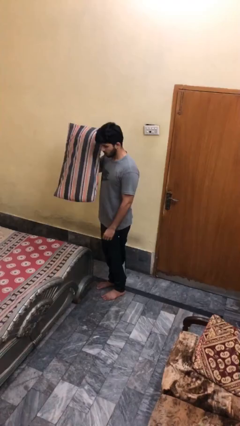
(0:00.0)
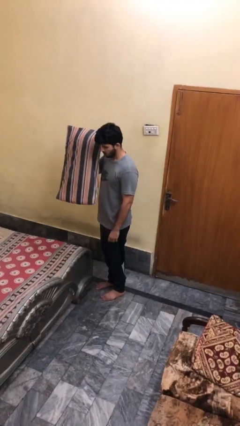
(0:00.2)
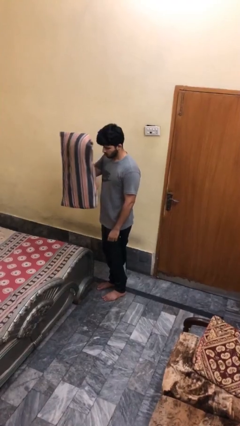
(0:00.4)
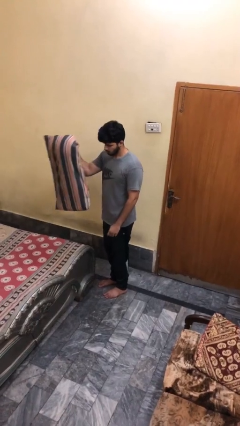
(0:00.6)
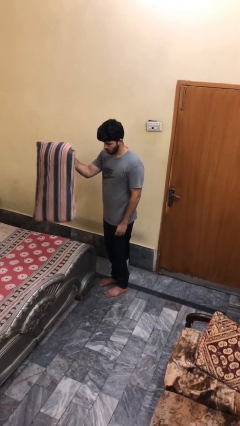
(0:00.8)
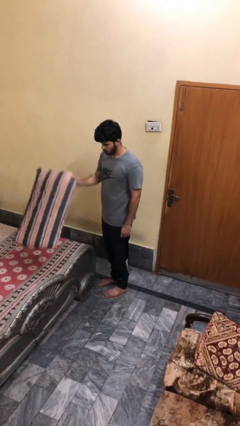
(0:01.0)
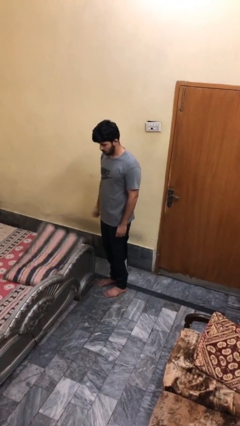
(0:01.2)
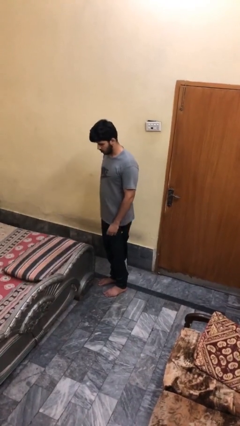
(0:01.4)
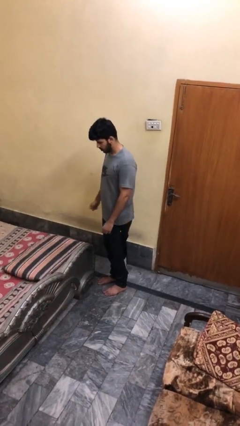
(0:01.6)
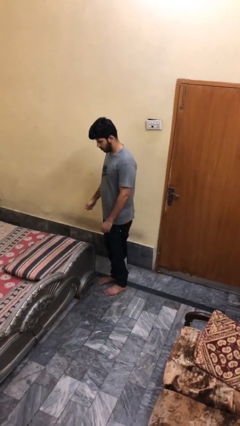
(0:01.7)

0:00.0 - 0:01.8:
person puts down object on bed

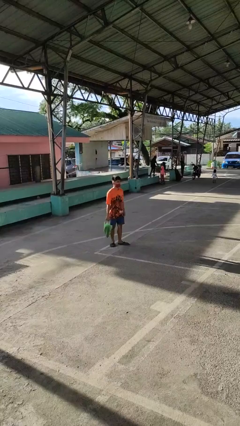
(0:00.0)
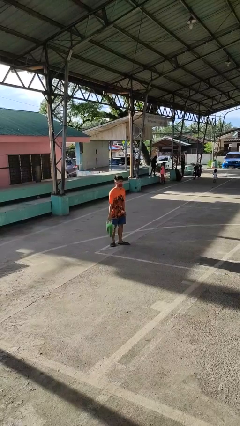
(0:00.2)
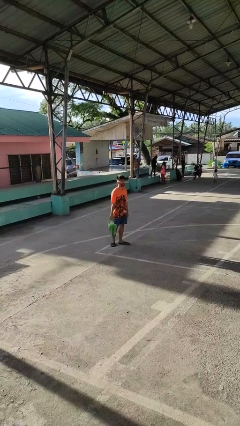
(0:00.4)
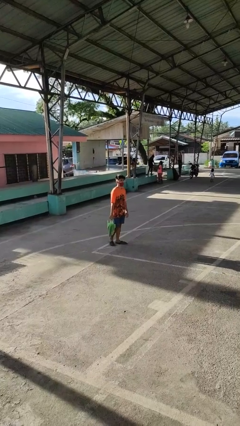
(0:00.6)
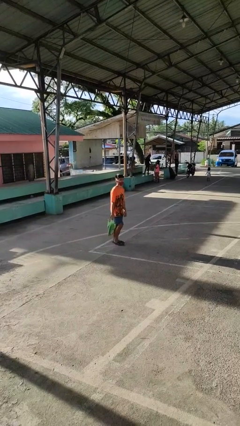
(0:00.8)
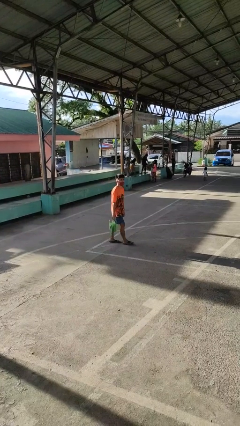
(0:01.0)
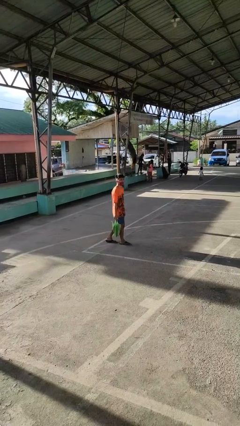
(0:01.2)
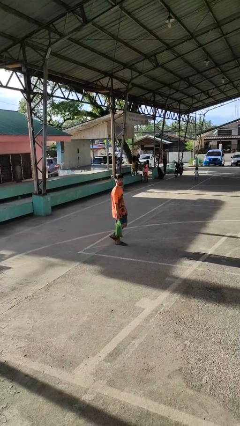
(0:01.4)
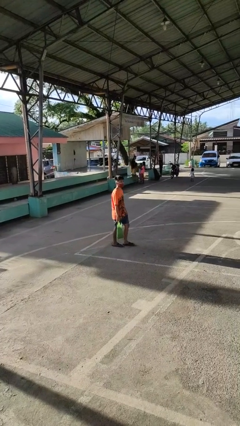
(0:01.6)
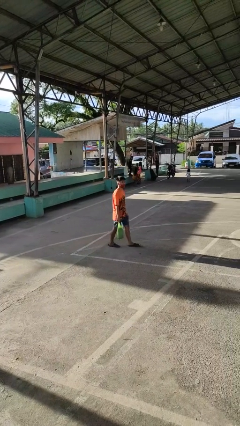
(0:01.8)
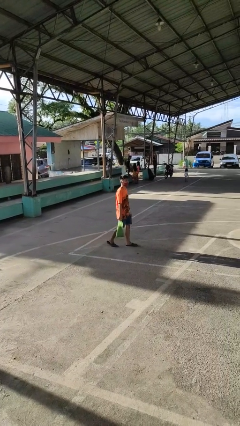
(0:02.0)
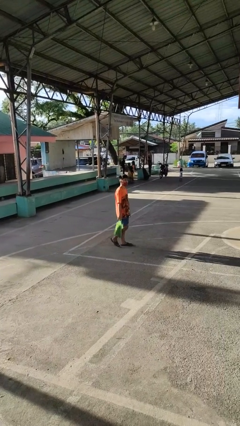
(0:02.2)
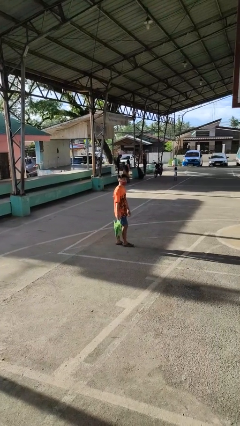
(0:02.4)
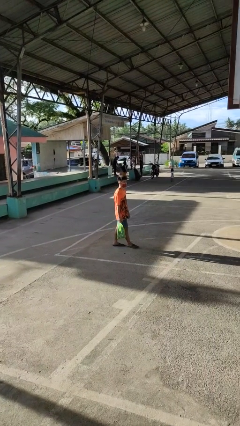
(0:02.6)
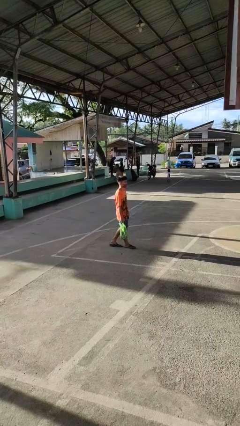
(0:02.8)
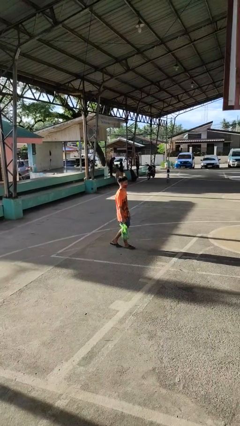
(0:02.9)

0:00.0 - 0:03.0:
person carries groceries

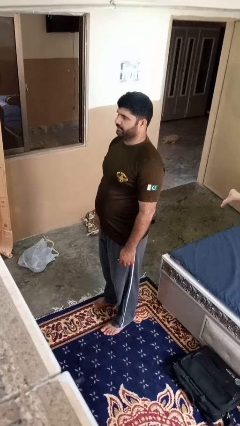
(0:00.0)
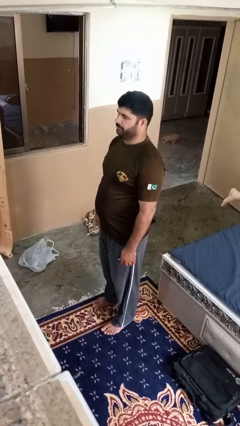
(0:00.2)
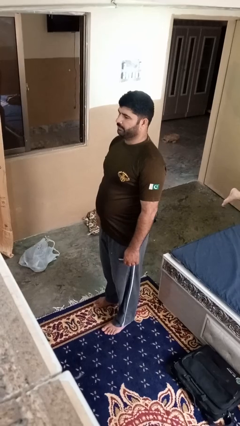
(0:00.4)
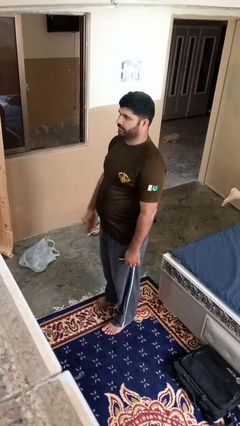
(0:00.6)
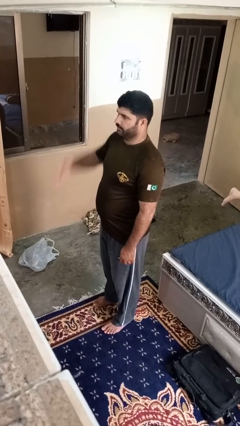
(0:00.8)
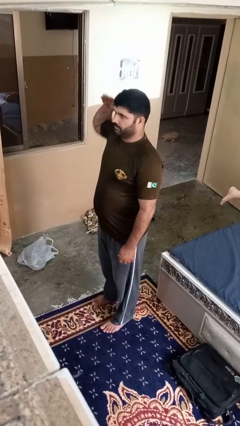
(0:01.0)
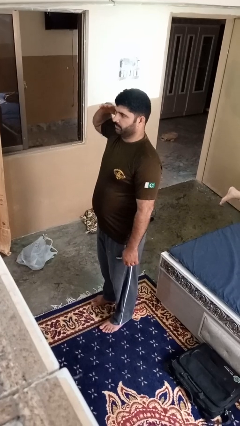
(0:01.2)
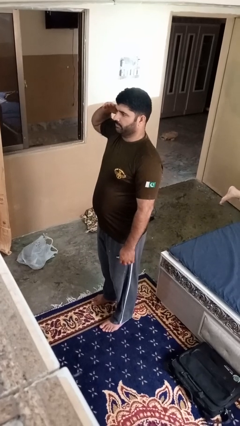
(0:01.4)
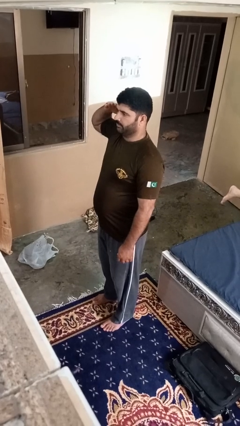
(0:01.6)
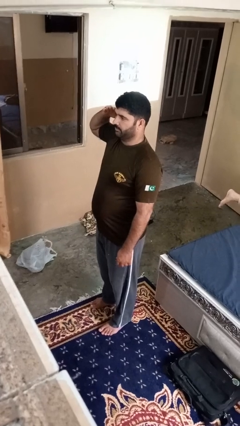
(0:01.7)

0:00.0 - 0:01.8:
person salutes

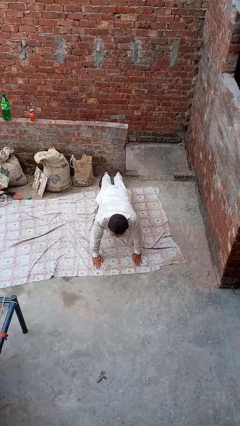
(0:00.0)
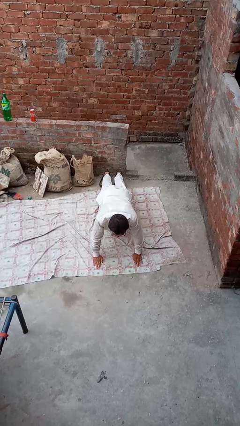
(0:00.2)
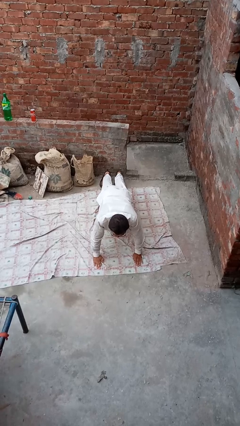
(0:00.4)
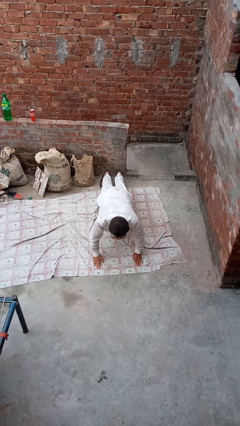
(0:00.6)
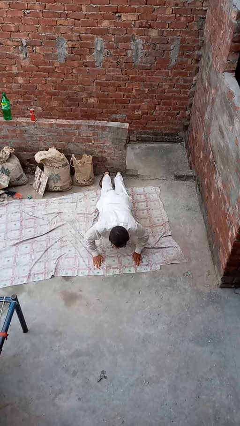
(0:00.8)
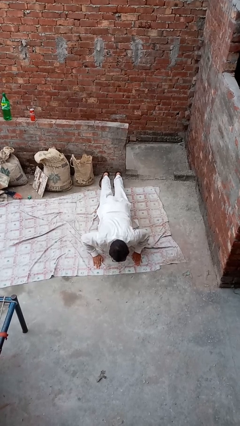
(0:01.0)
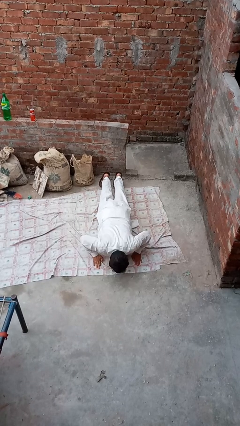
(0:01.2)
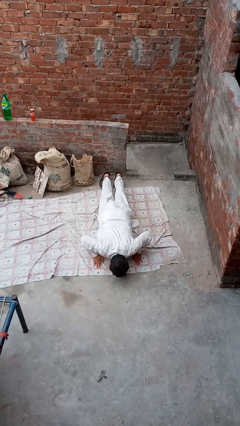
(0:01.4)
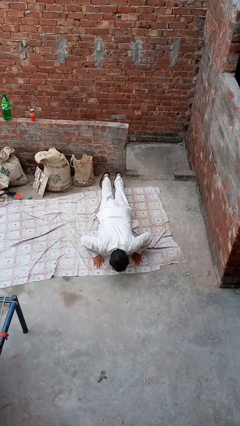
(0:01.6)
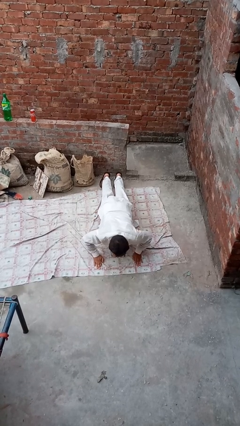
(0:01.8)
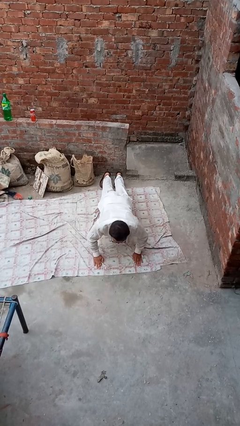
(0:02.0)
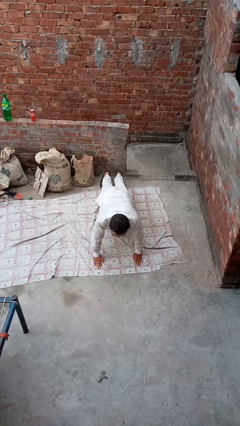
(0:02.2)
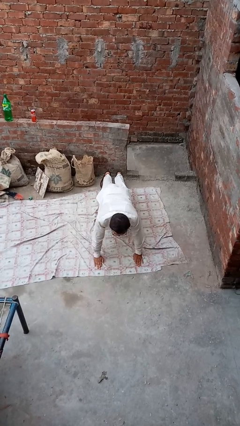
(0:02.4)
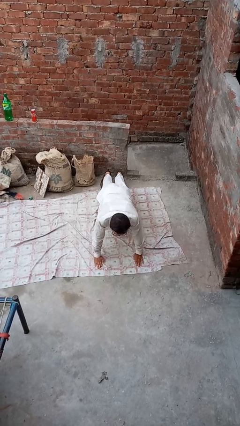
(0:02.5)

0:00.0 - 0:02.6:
person exercises with situp

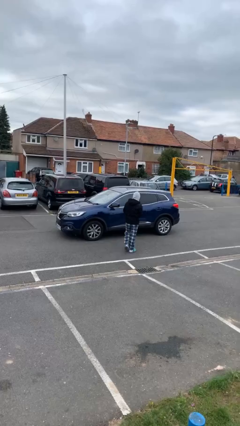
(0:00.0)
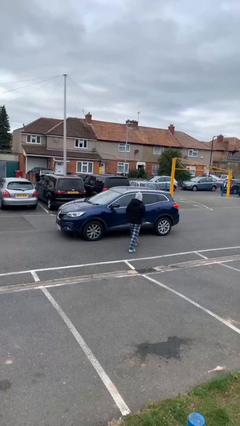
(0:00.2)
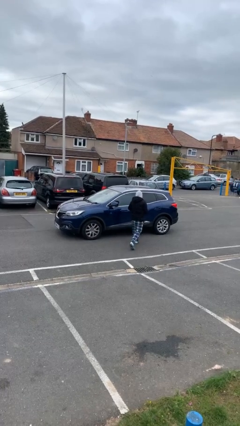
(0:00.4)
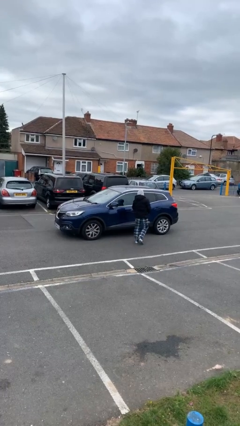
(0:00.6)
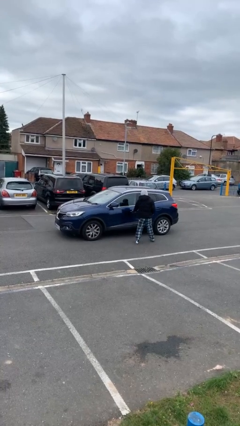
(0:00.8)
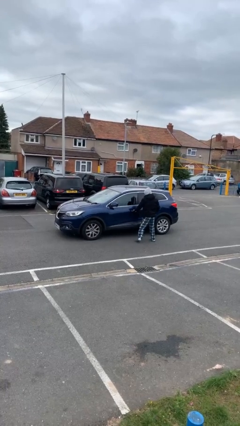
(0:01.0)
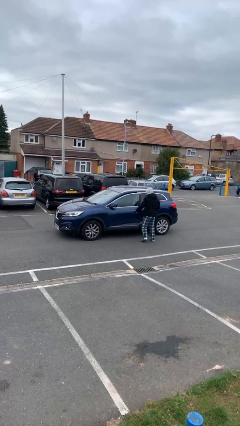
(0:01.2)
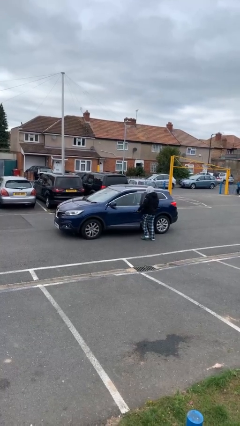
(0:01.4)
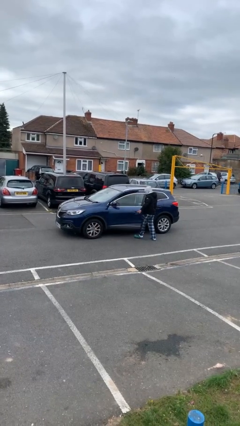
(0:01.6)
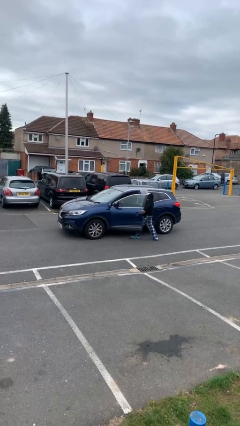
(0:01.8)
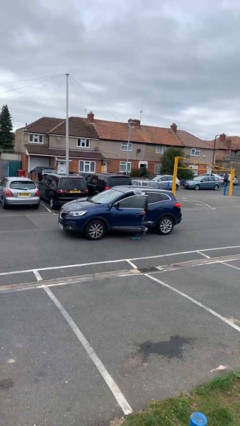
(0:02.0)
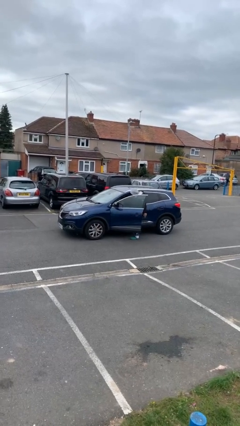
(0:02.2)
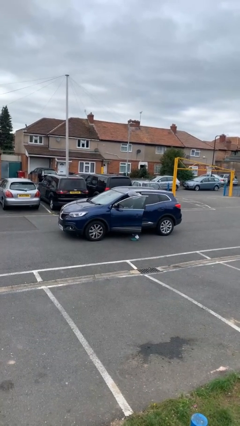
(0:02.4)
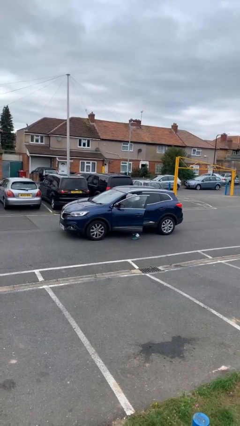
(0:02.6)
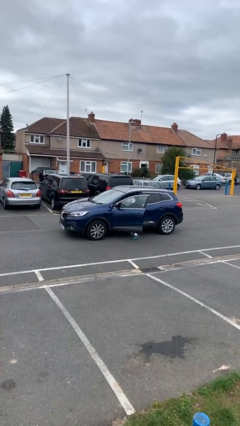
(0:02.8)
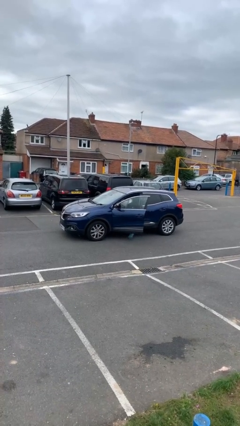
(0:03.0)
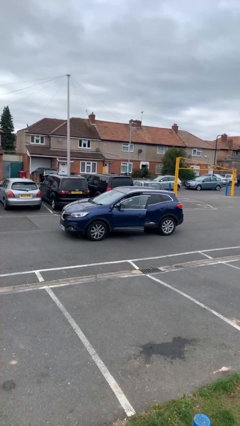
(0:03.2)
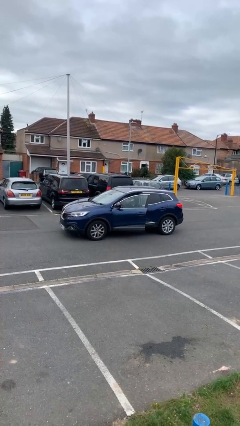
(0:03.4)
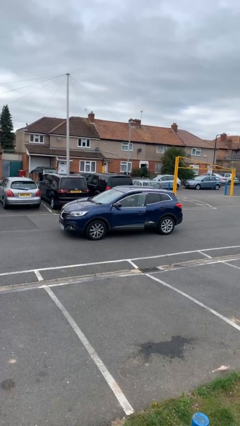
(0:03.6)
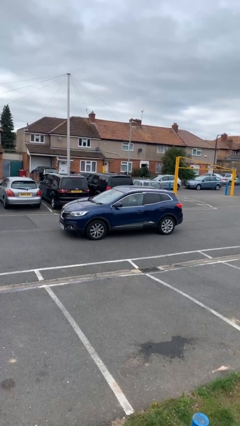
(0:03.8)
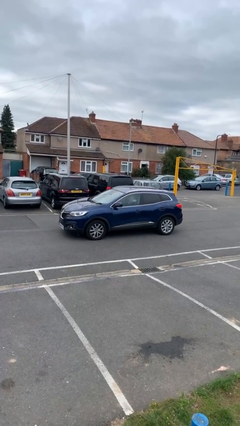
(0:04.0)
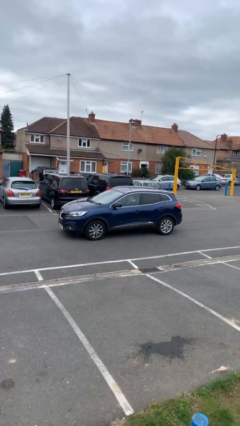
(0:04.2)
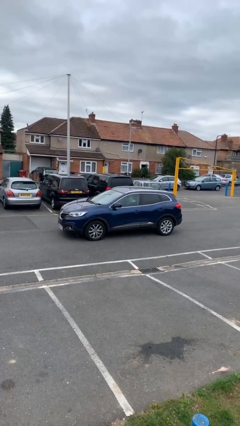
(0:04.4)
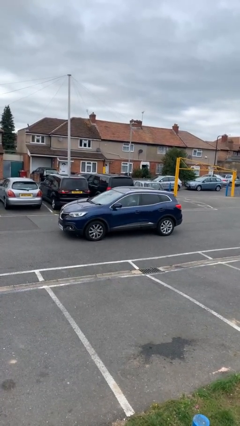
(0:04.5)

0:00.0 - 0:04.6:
car picks up person

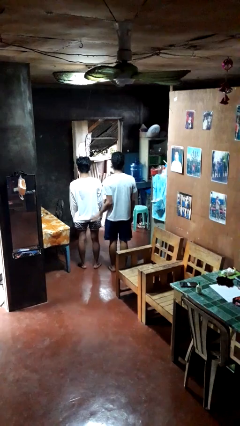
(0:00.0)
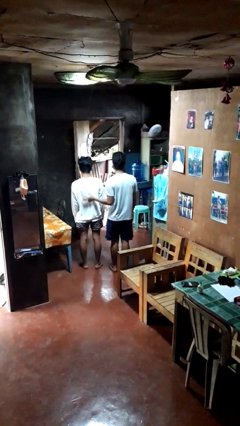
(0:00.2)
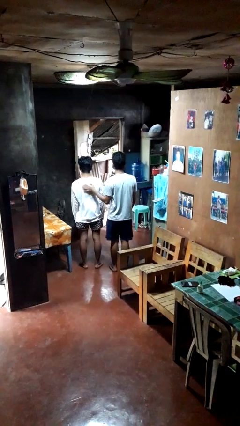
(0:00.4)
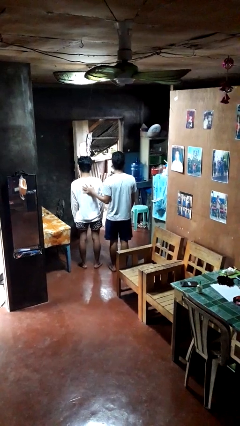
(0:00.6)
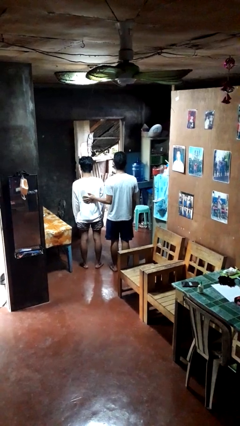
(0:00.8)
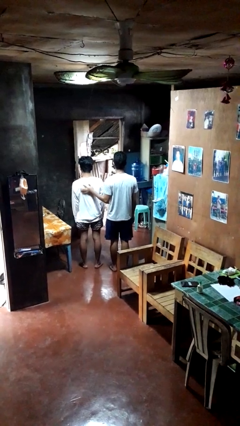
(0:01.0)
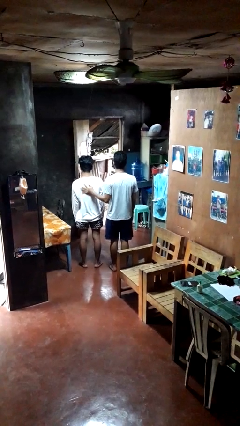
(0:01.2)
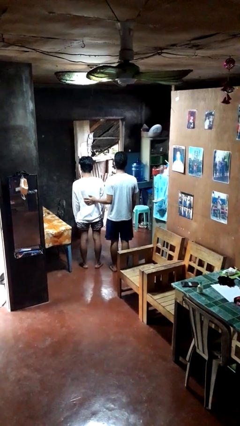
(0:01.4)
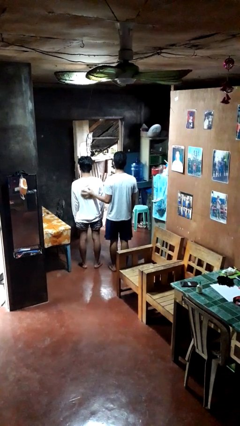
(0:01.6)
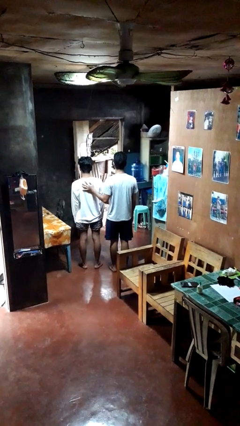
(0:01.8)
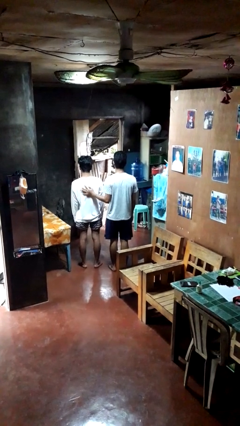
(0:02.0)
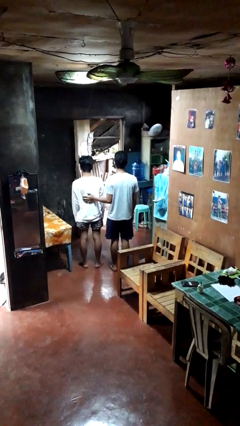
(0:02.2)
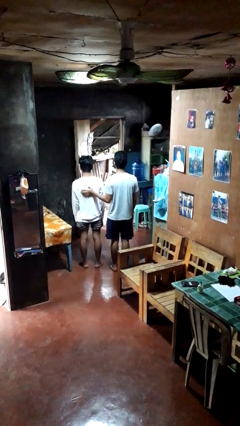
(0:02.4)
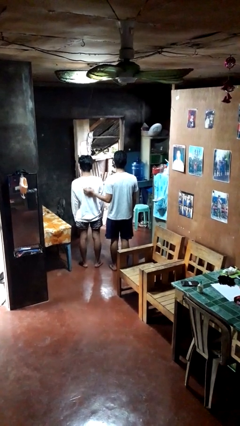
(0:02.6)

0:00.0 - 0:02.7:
person touches back of person

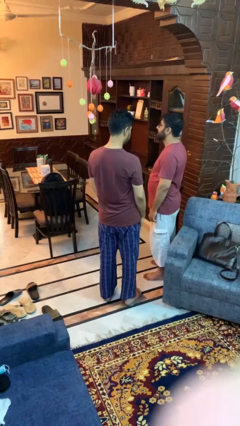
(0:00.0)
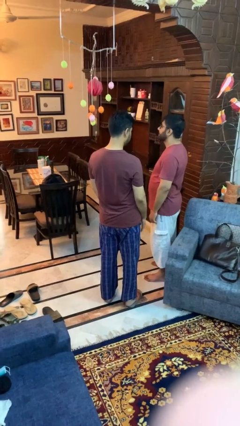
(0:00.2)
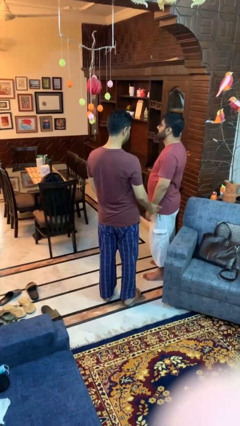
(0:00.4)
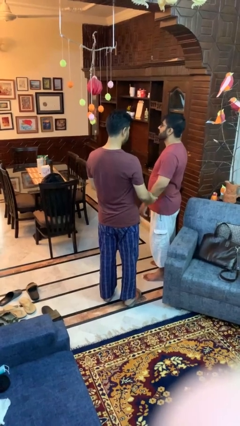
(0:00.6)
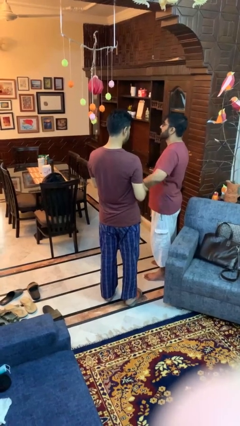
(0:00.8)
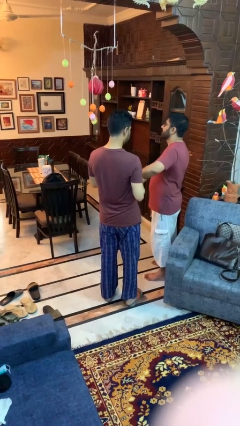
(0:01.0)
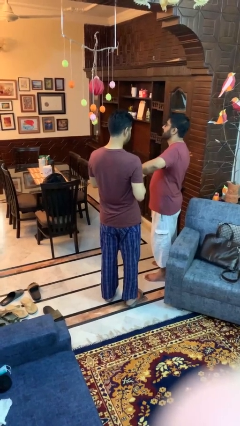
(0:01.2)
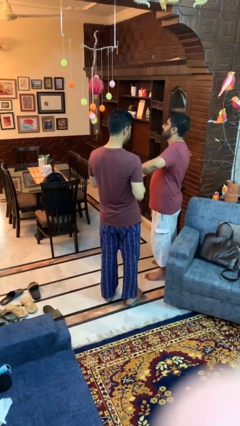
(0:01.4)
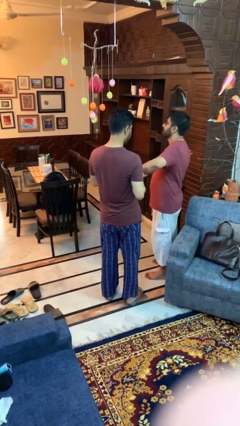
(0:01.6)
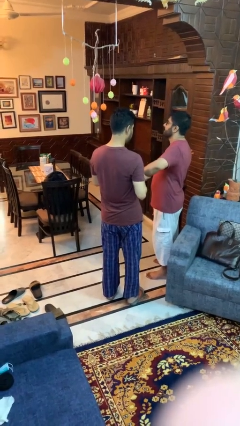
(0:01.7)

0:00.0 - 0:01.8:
person grabs person by forearm
